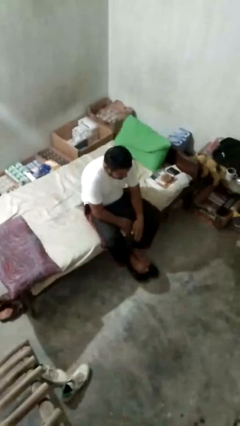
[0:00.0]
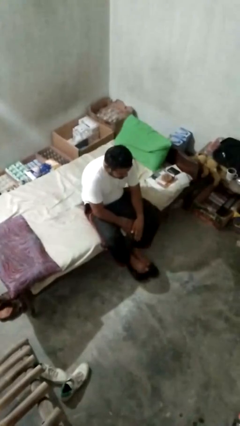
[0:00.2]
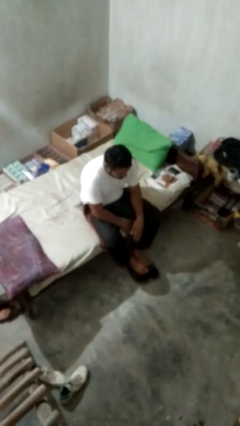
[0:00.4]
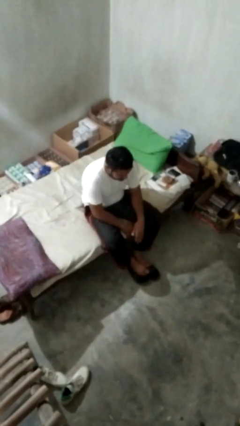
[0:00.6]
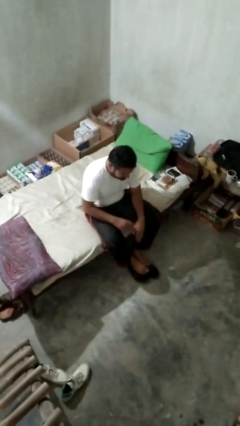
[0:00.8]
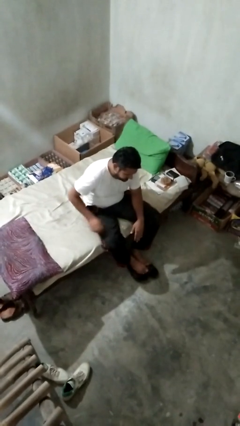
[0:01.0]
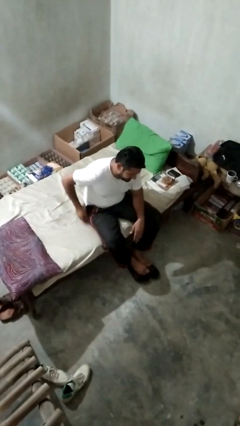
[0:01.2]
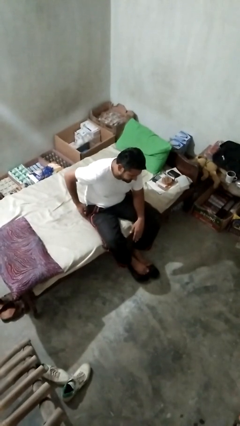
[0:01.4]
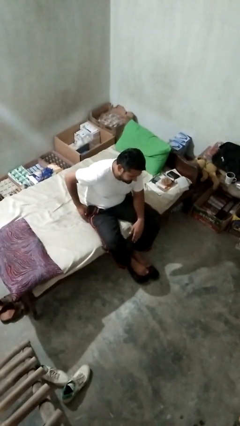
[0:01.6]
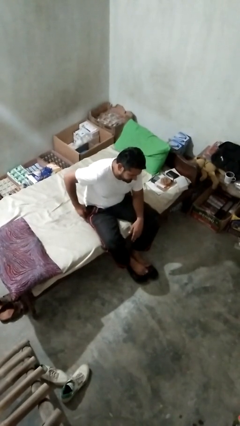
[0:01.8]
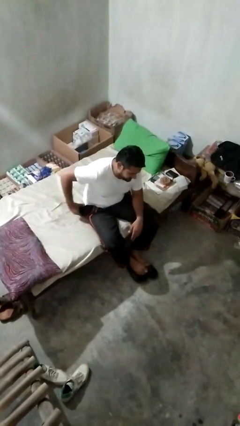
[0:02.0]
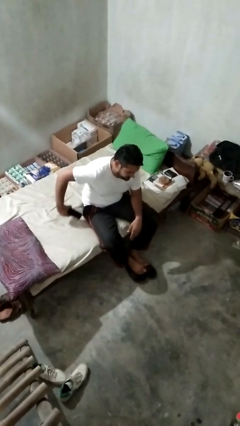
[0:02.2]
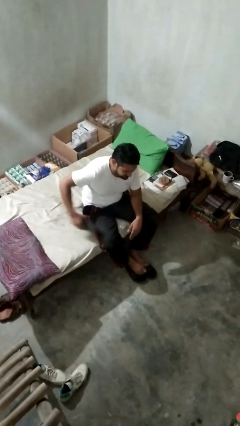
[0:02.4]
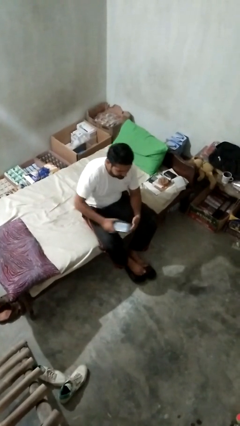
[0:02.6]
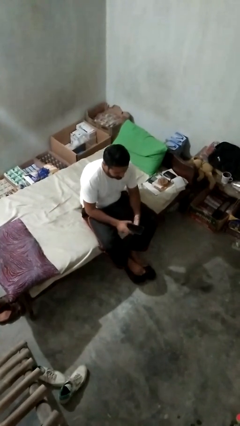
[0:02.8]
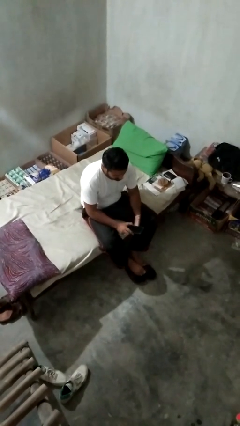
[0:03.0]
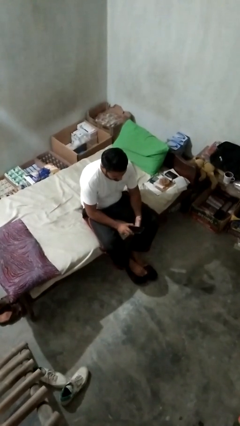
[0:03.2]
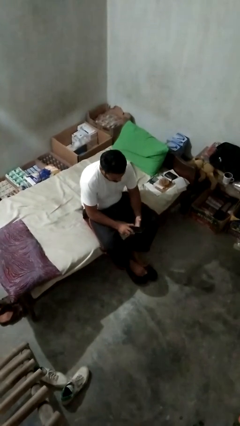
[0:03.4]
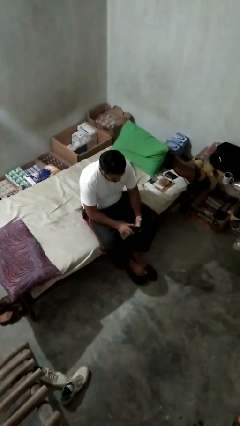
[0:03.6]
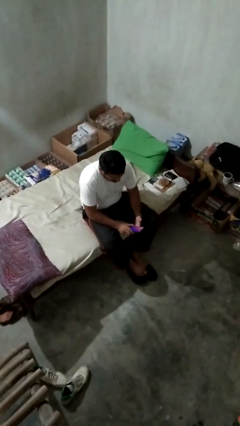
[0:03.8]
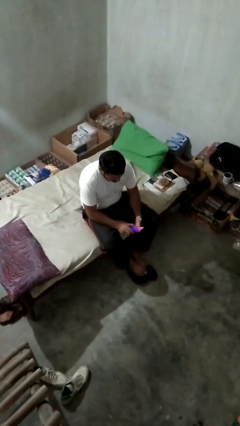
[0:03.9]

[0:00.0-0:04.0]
person takes phone from pocket

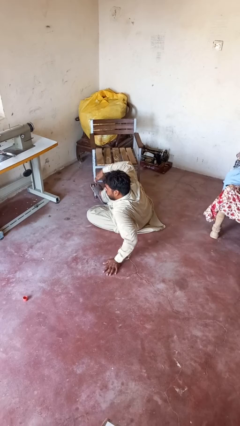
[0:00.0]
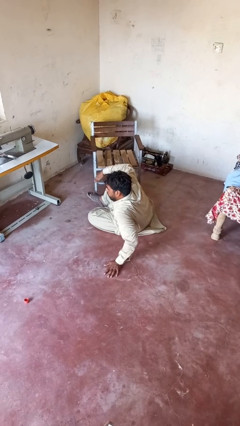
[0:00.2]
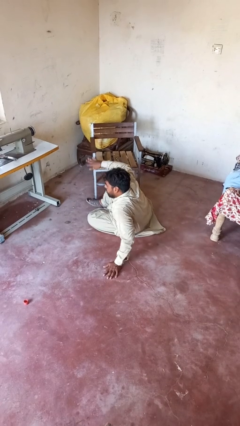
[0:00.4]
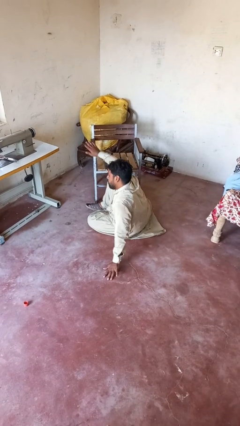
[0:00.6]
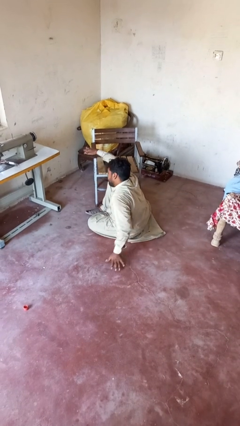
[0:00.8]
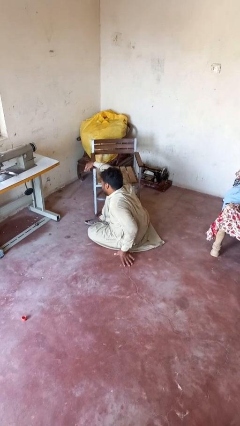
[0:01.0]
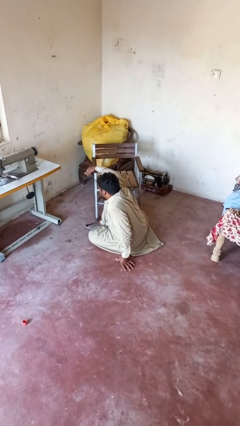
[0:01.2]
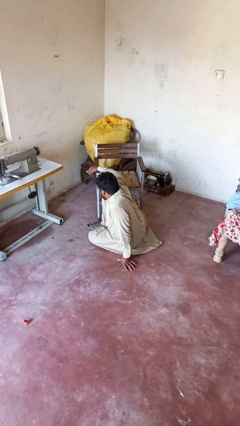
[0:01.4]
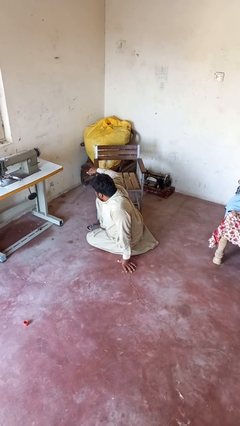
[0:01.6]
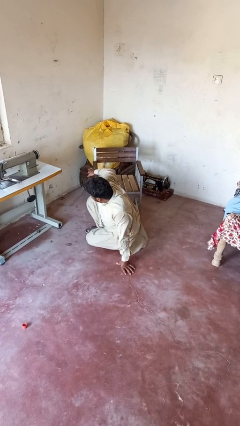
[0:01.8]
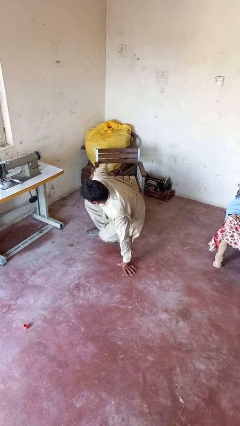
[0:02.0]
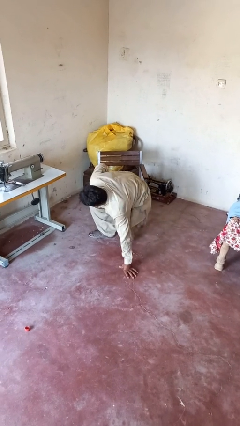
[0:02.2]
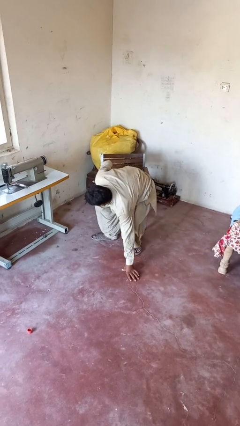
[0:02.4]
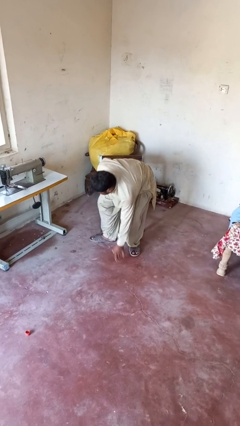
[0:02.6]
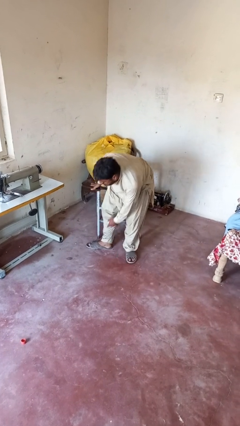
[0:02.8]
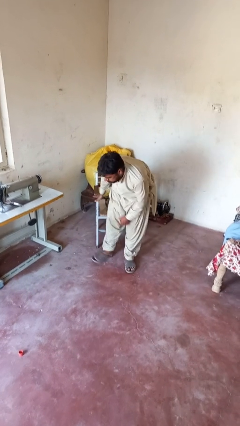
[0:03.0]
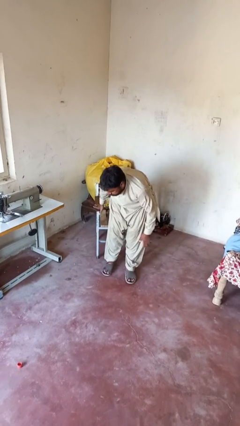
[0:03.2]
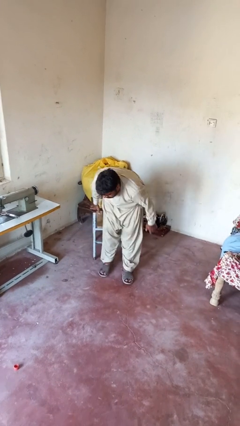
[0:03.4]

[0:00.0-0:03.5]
person stands up from floor

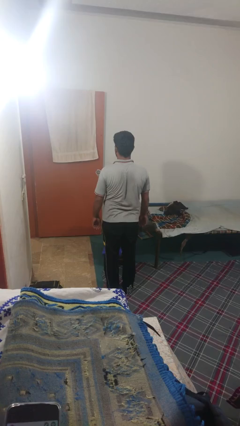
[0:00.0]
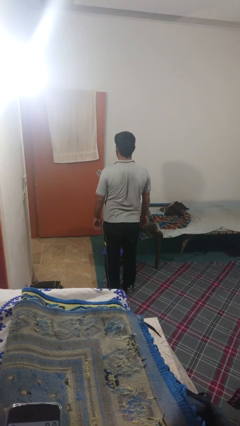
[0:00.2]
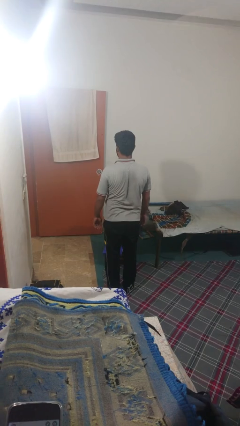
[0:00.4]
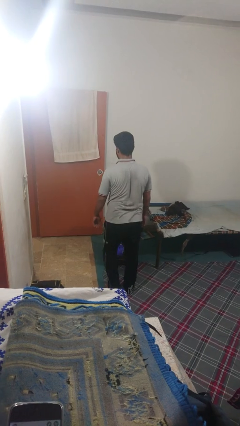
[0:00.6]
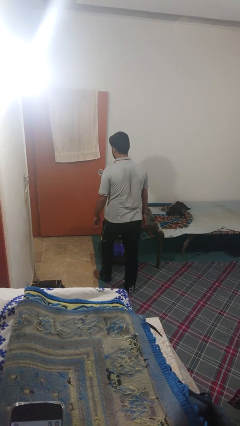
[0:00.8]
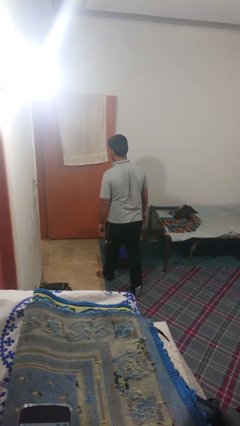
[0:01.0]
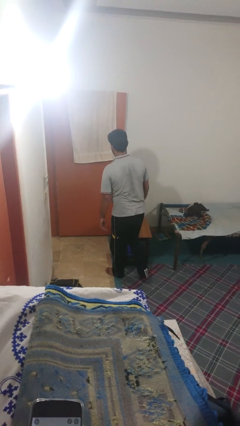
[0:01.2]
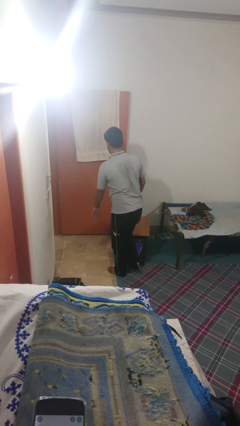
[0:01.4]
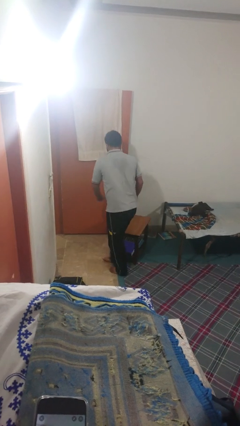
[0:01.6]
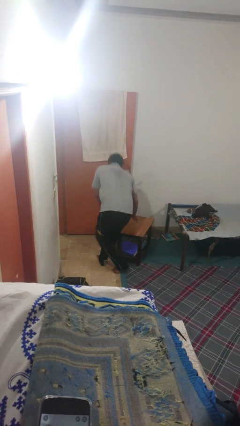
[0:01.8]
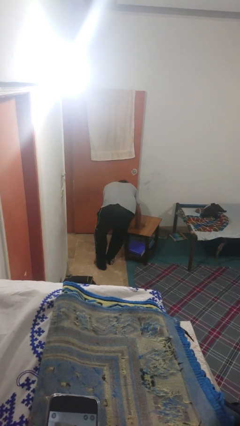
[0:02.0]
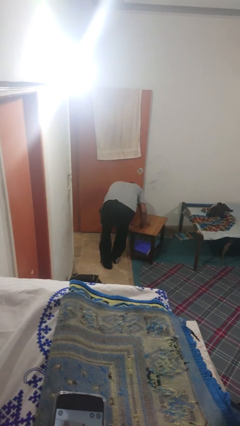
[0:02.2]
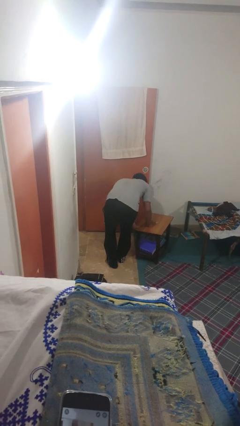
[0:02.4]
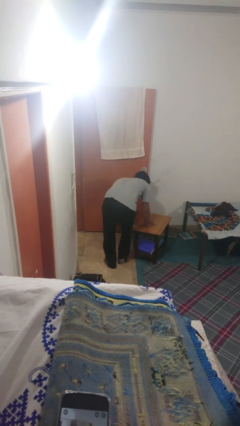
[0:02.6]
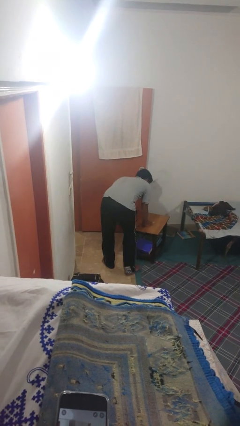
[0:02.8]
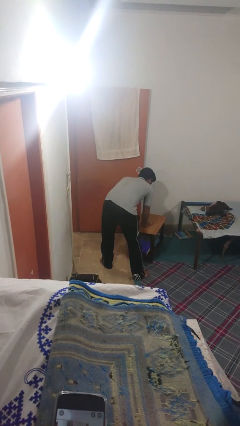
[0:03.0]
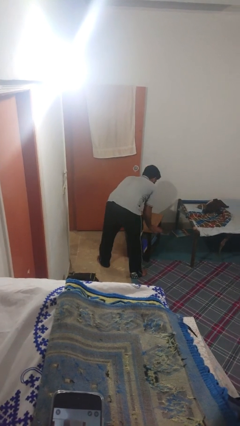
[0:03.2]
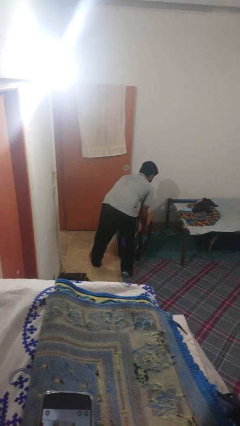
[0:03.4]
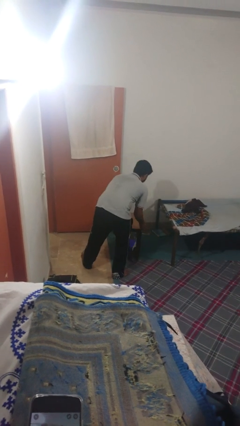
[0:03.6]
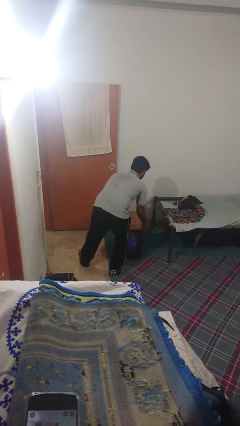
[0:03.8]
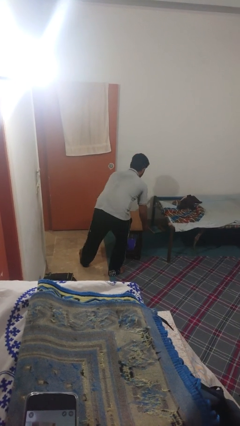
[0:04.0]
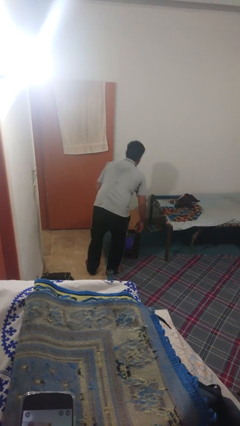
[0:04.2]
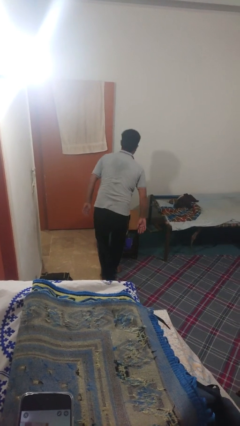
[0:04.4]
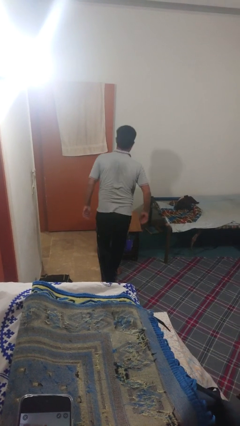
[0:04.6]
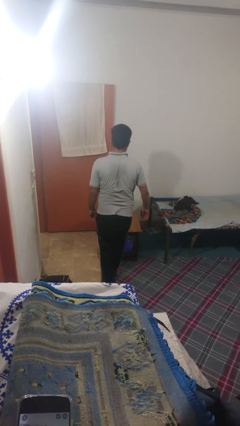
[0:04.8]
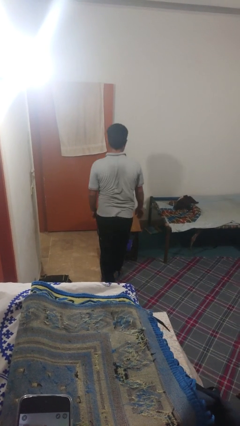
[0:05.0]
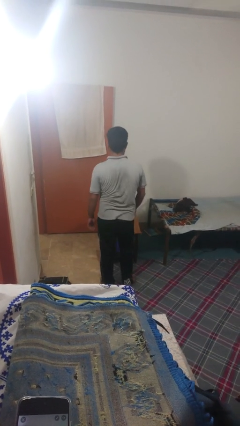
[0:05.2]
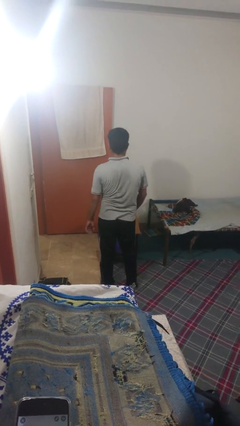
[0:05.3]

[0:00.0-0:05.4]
person bumps into table

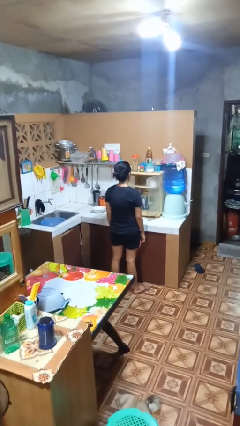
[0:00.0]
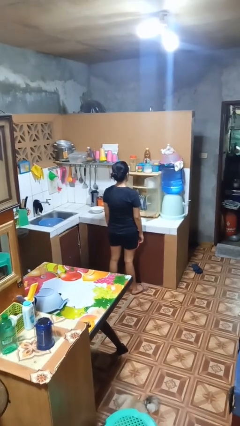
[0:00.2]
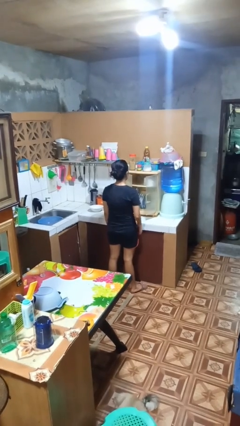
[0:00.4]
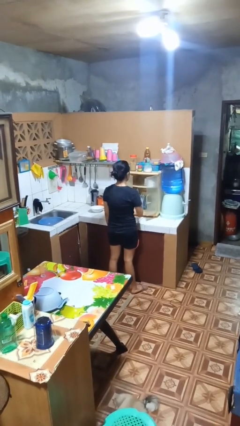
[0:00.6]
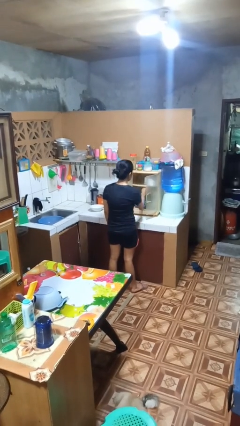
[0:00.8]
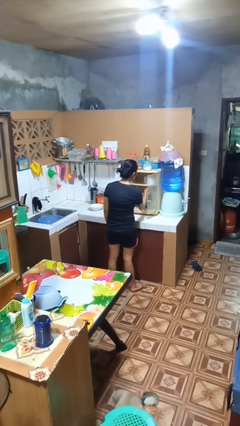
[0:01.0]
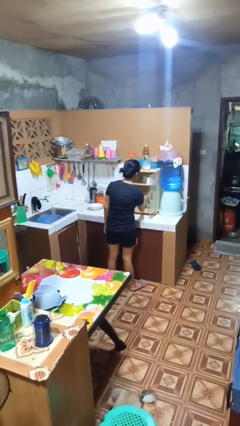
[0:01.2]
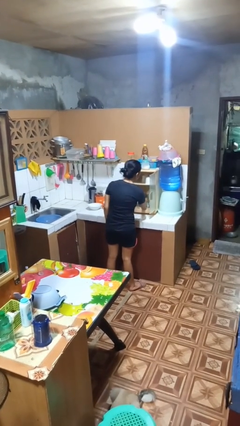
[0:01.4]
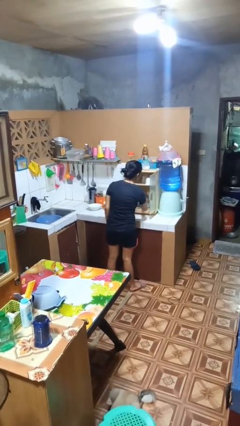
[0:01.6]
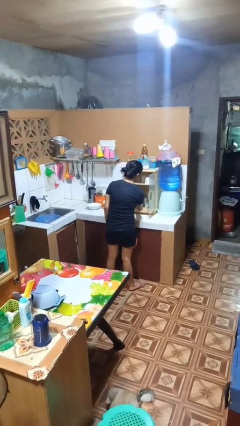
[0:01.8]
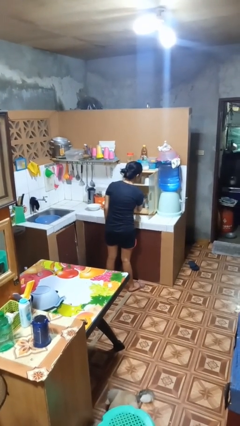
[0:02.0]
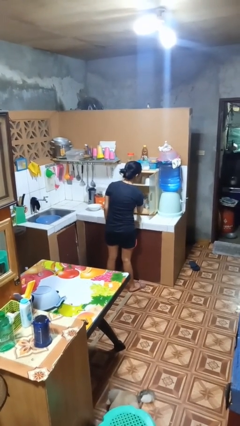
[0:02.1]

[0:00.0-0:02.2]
person searches in kitchen drawer

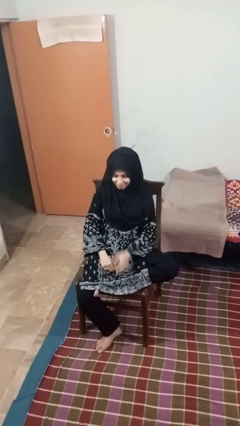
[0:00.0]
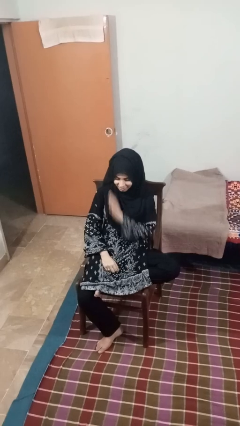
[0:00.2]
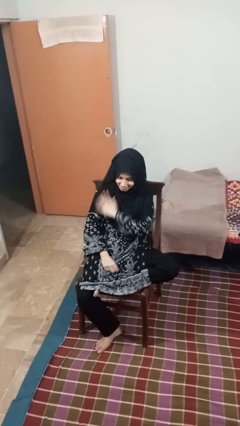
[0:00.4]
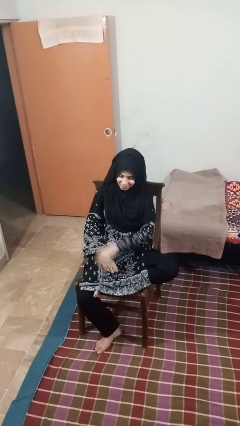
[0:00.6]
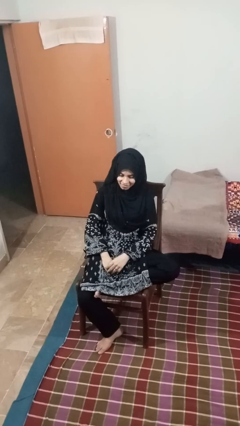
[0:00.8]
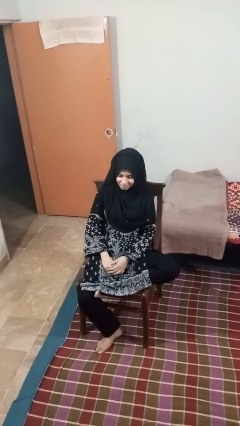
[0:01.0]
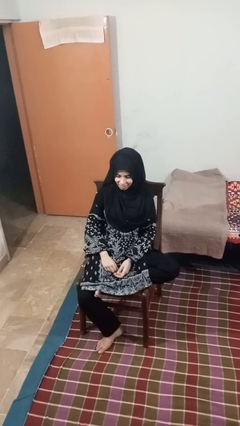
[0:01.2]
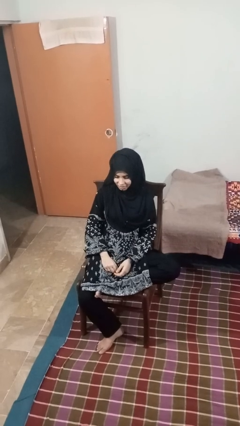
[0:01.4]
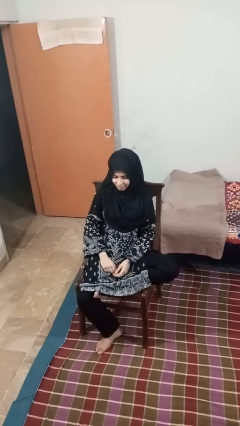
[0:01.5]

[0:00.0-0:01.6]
person swats bug

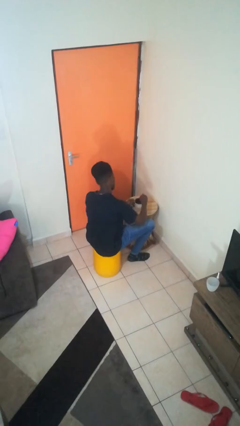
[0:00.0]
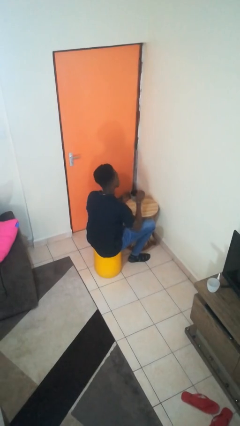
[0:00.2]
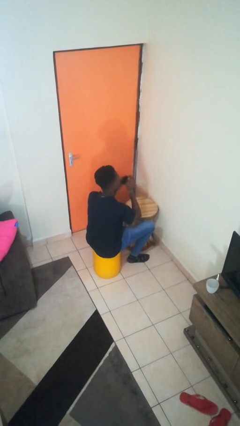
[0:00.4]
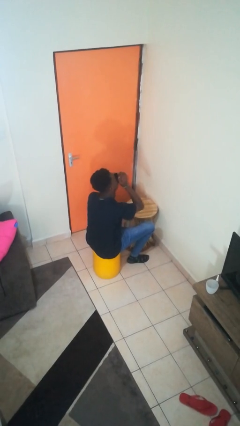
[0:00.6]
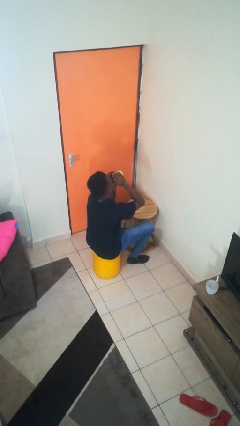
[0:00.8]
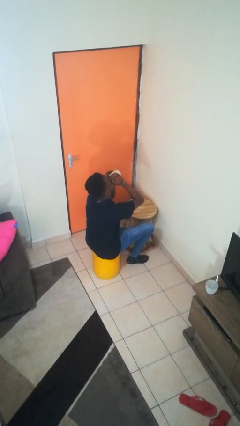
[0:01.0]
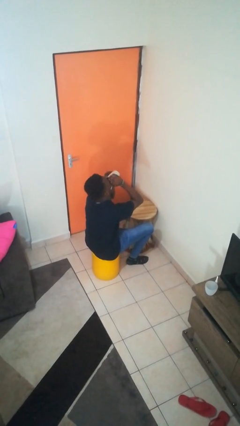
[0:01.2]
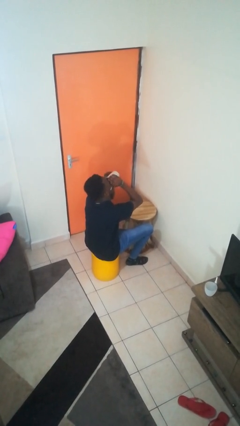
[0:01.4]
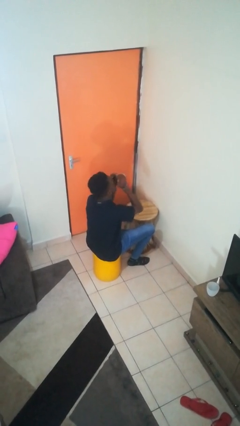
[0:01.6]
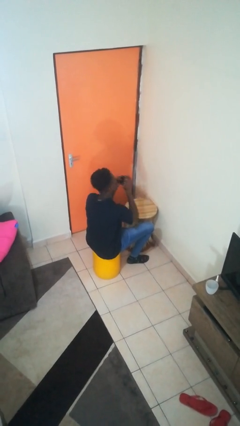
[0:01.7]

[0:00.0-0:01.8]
person drinks from mug
